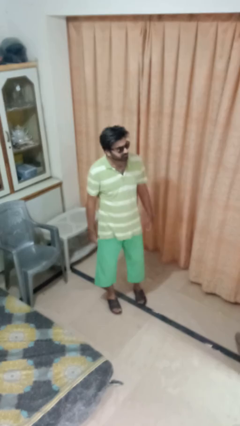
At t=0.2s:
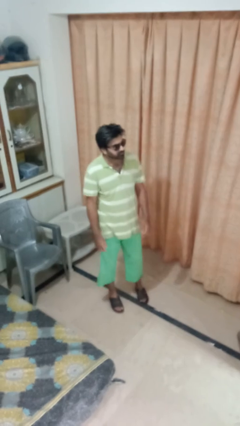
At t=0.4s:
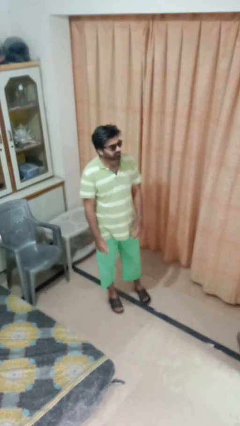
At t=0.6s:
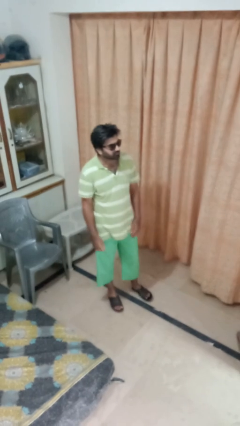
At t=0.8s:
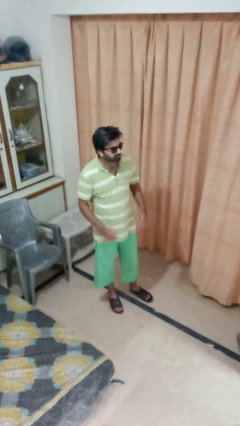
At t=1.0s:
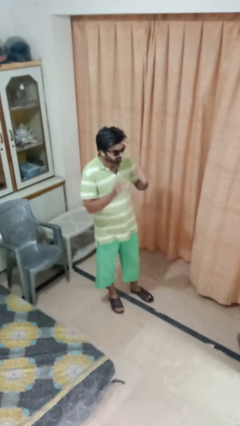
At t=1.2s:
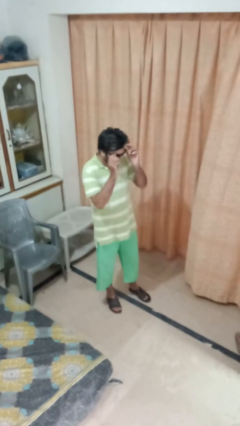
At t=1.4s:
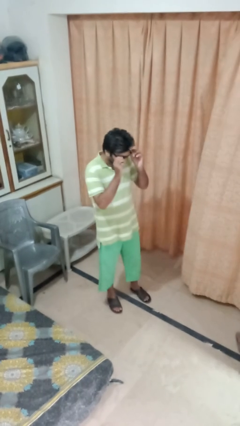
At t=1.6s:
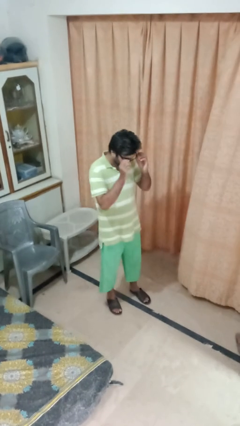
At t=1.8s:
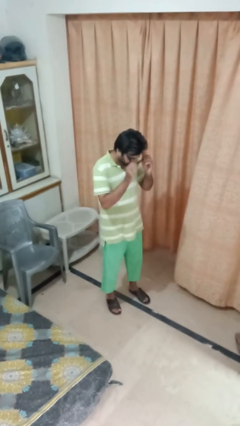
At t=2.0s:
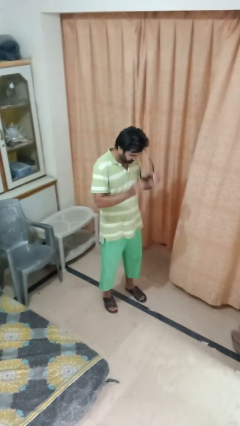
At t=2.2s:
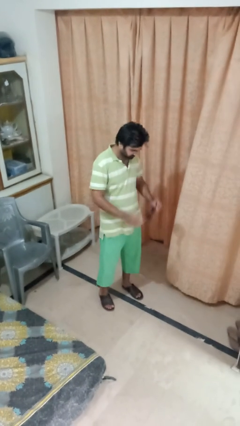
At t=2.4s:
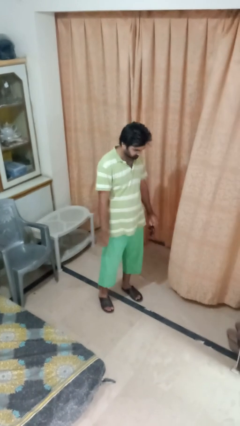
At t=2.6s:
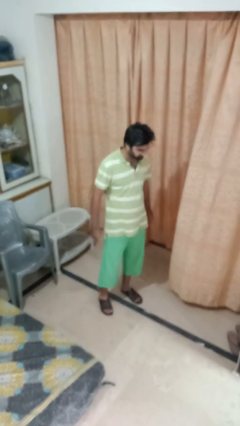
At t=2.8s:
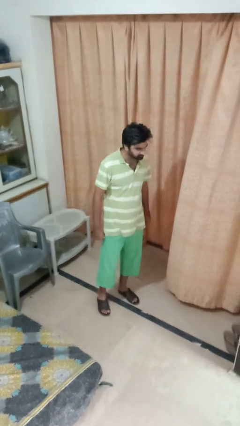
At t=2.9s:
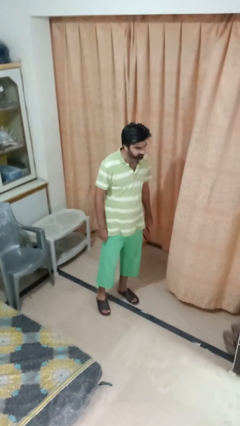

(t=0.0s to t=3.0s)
person takes off sunglasses

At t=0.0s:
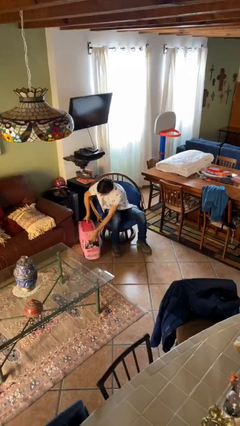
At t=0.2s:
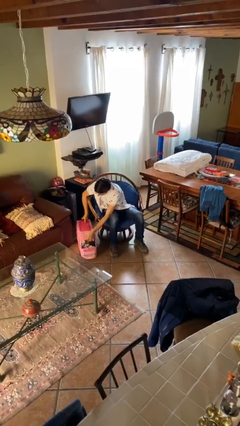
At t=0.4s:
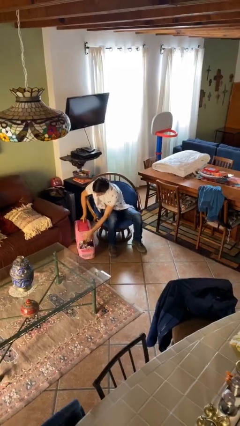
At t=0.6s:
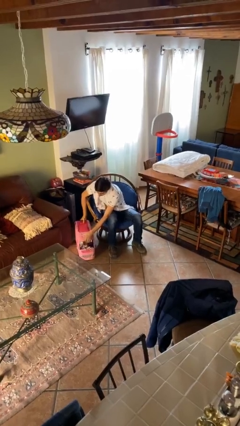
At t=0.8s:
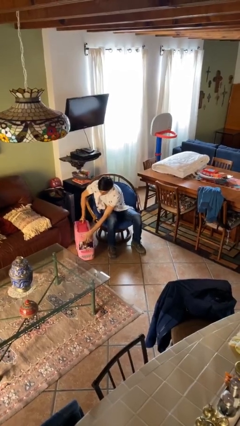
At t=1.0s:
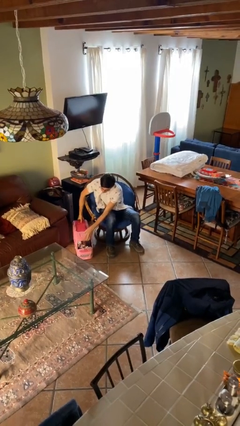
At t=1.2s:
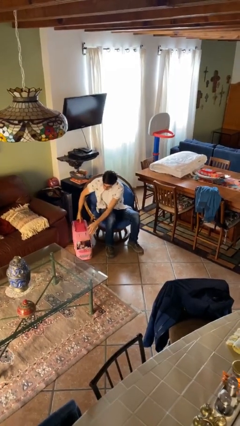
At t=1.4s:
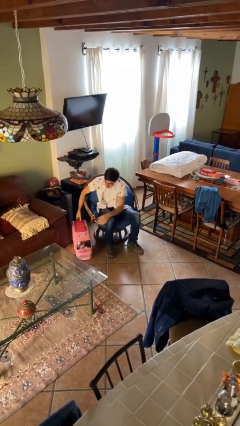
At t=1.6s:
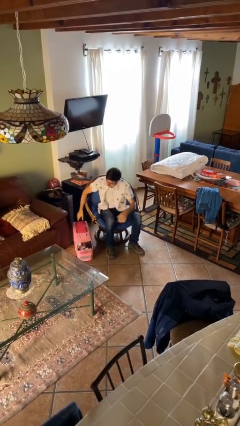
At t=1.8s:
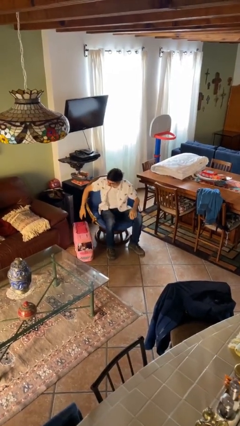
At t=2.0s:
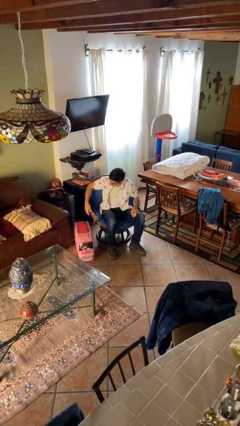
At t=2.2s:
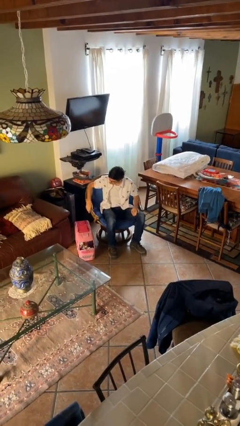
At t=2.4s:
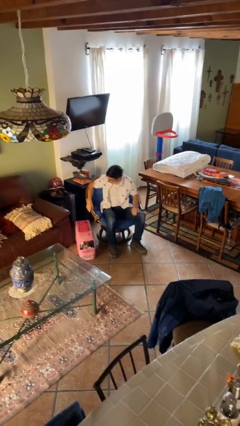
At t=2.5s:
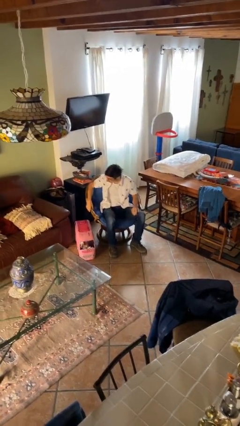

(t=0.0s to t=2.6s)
person puts down object on floor

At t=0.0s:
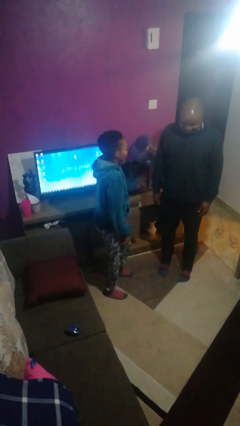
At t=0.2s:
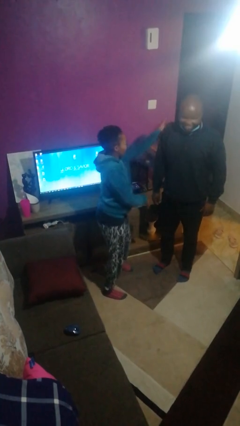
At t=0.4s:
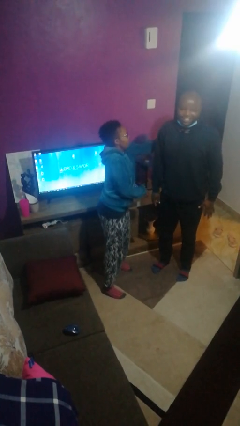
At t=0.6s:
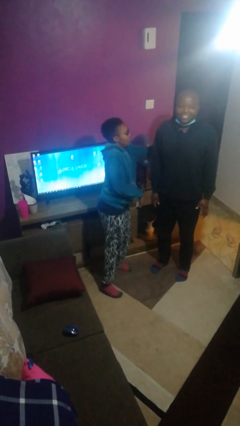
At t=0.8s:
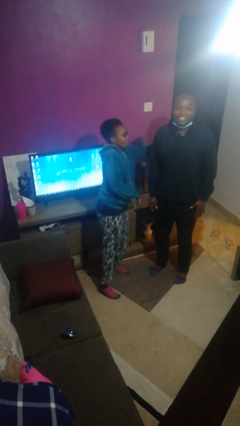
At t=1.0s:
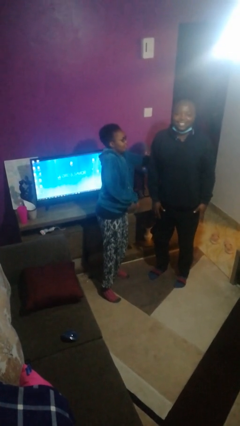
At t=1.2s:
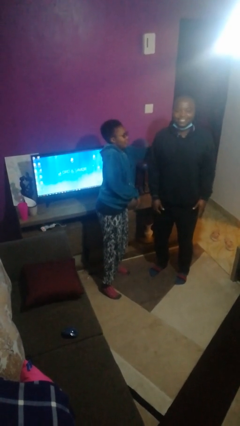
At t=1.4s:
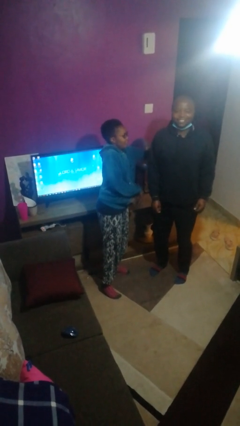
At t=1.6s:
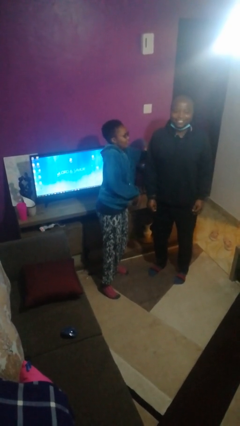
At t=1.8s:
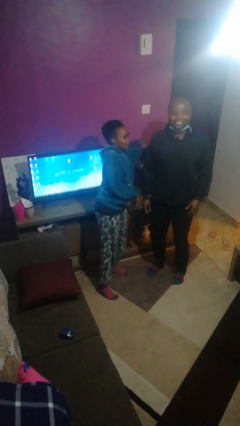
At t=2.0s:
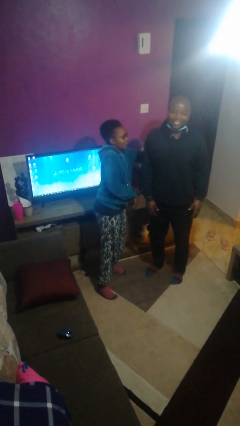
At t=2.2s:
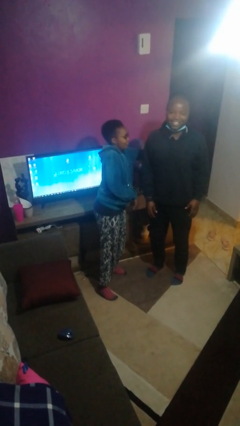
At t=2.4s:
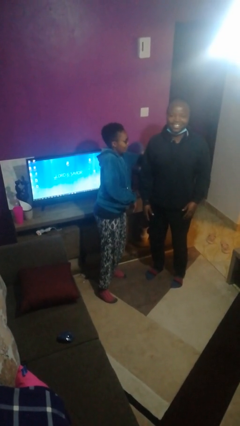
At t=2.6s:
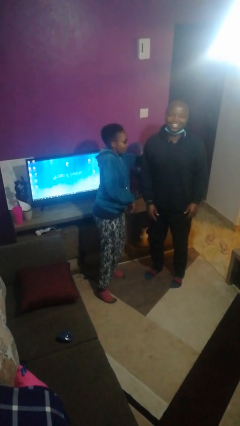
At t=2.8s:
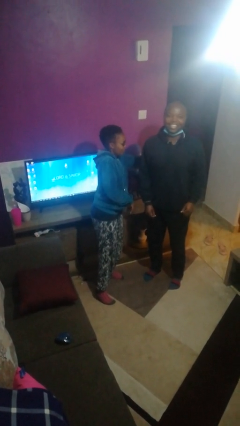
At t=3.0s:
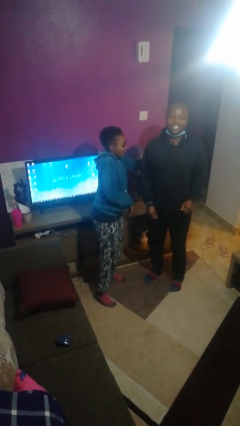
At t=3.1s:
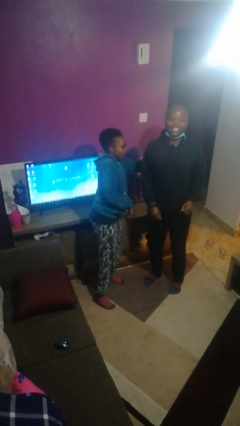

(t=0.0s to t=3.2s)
person tickles person

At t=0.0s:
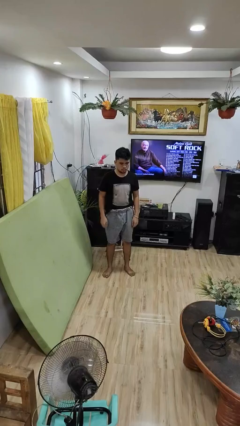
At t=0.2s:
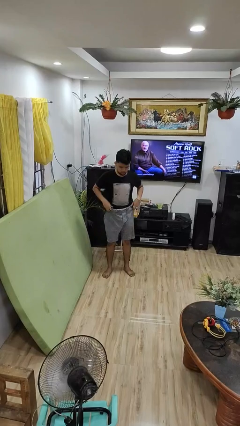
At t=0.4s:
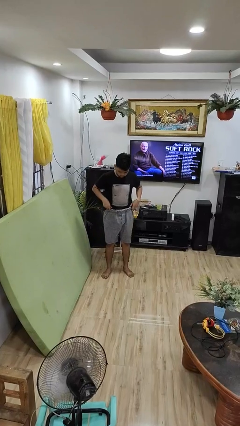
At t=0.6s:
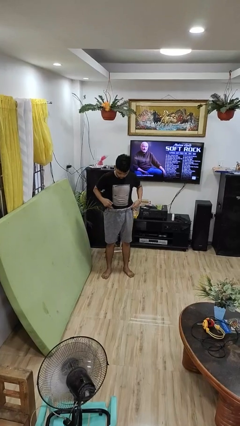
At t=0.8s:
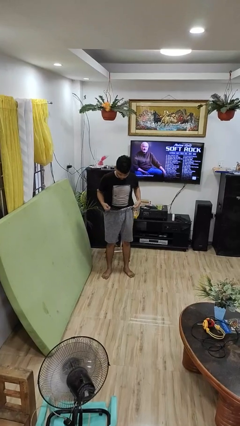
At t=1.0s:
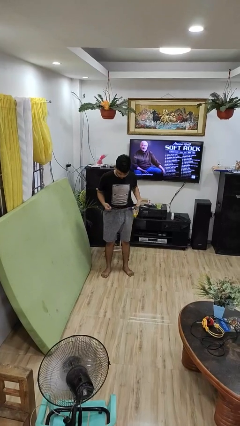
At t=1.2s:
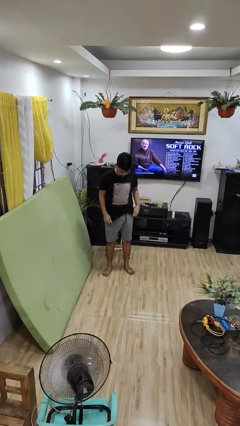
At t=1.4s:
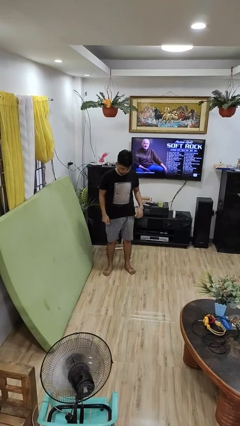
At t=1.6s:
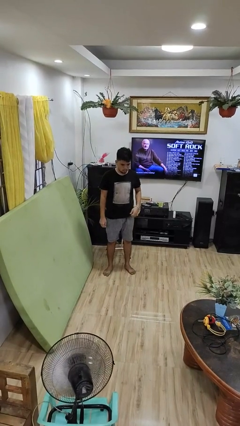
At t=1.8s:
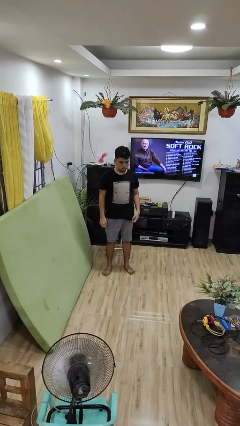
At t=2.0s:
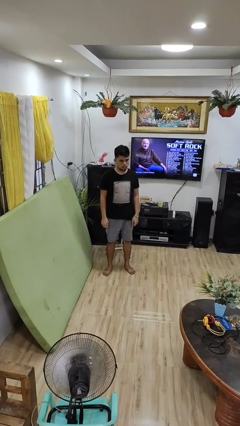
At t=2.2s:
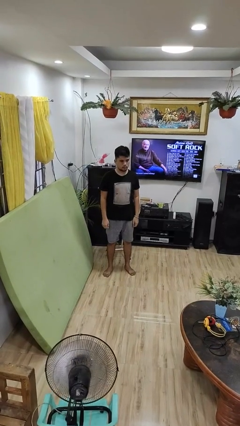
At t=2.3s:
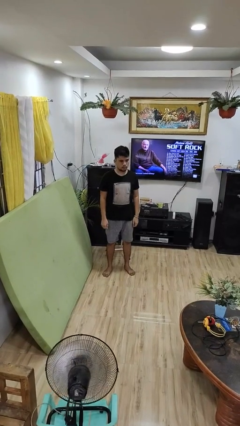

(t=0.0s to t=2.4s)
person untucks shirt

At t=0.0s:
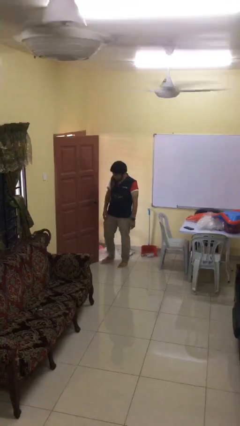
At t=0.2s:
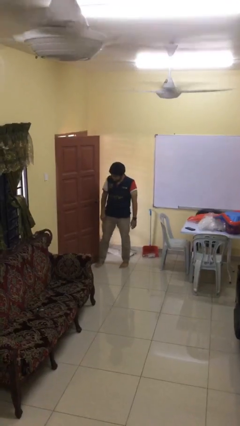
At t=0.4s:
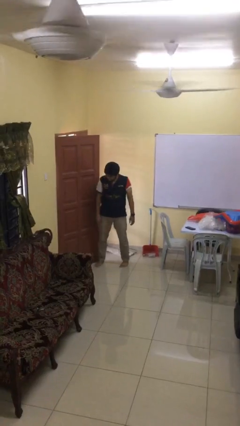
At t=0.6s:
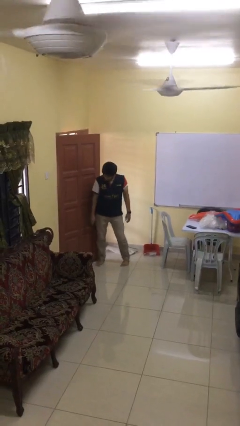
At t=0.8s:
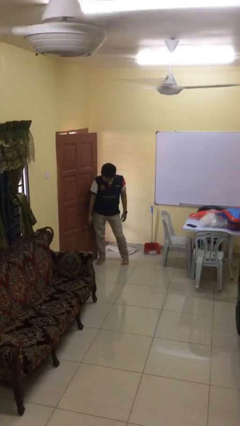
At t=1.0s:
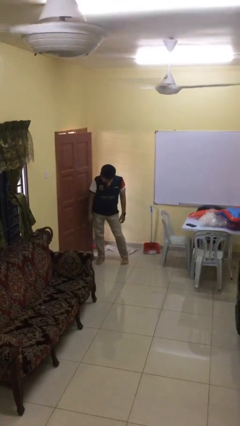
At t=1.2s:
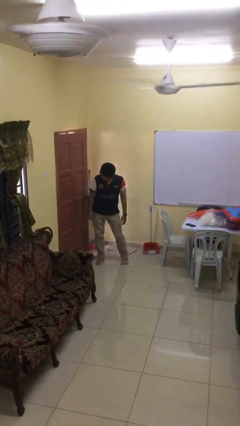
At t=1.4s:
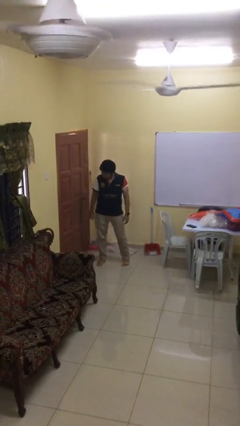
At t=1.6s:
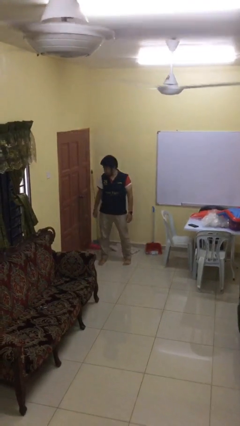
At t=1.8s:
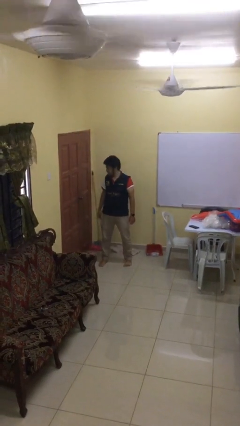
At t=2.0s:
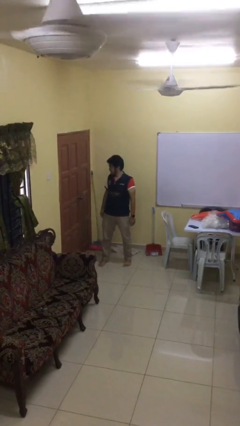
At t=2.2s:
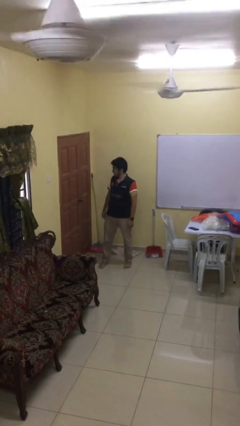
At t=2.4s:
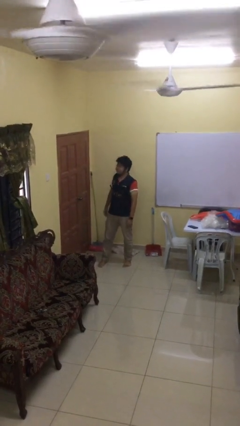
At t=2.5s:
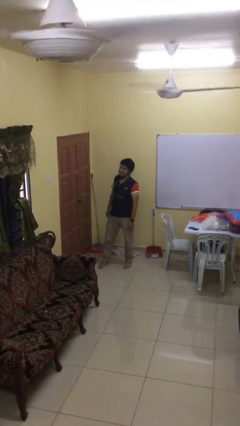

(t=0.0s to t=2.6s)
person closes door with hip

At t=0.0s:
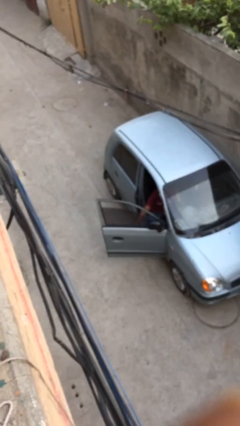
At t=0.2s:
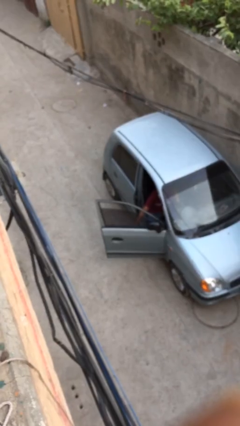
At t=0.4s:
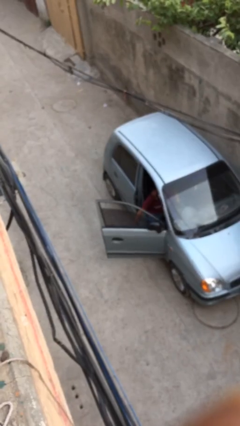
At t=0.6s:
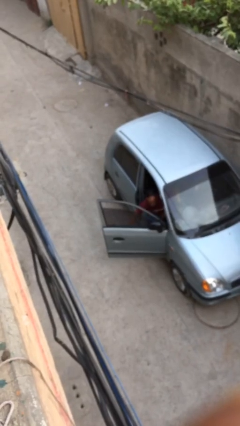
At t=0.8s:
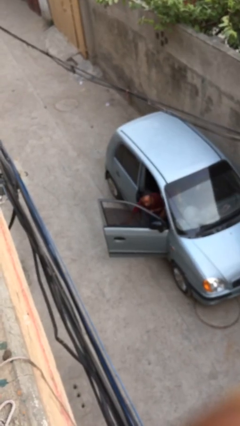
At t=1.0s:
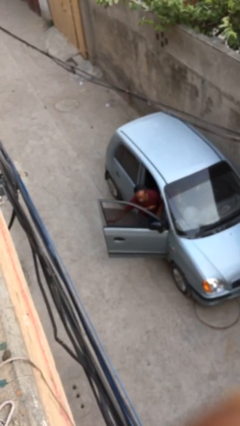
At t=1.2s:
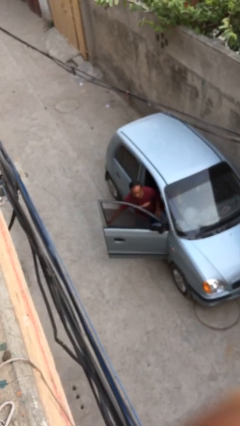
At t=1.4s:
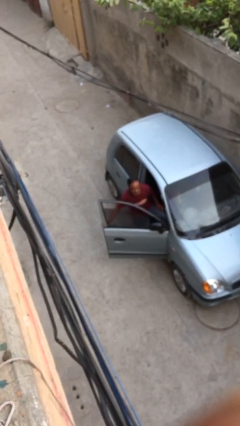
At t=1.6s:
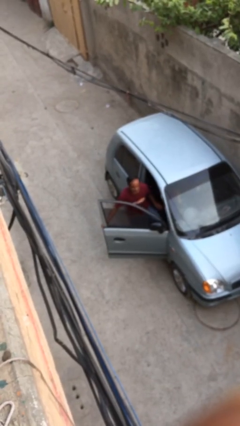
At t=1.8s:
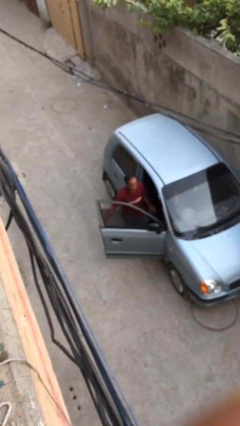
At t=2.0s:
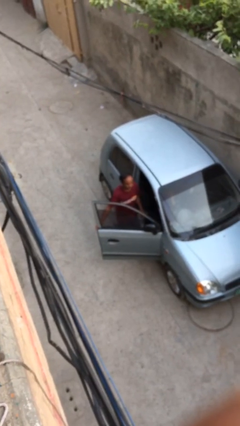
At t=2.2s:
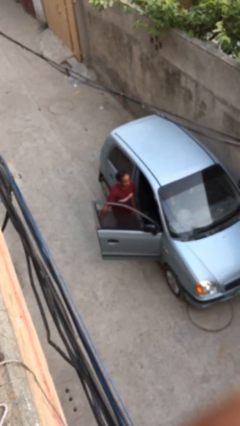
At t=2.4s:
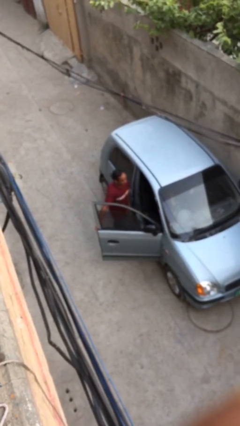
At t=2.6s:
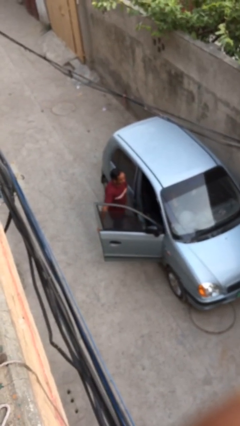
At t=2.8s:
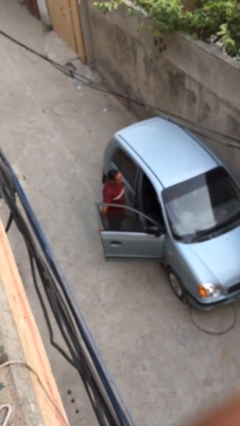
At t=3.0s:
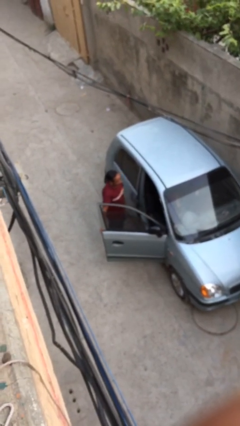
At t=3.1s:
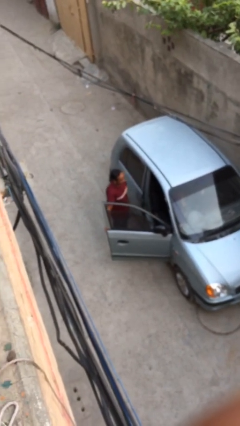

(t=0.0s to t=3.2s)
person exits car
